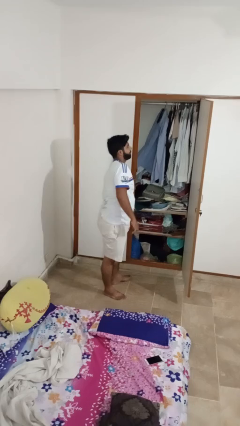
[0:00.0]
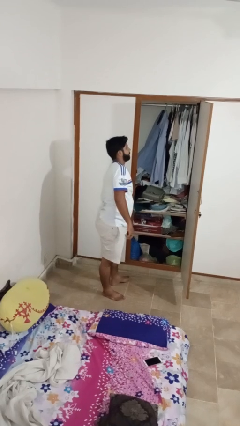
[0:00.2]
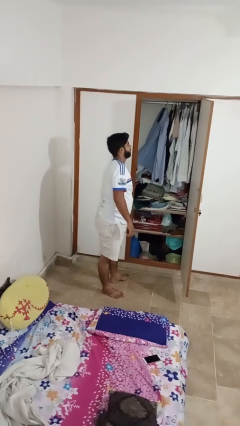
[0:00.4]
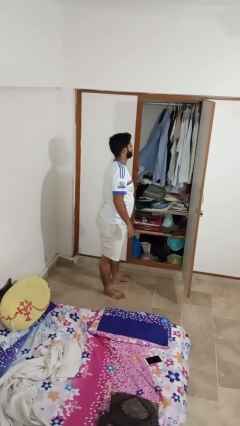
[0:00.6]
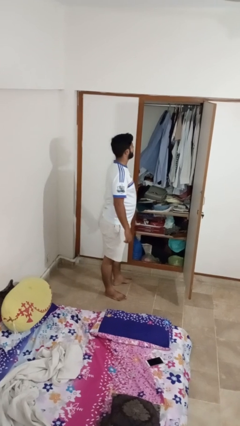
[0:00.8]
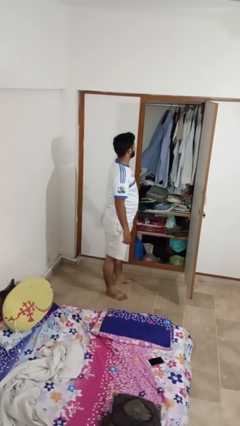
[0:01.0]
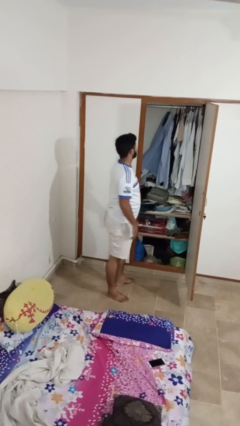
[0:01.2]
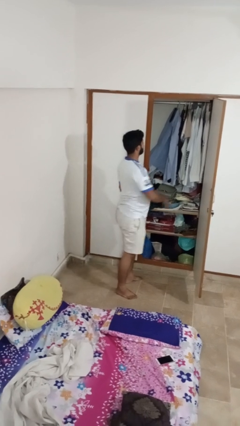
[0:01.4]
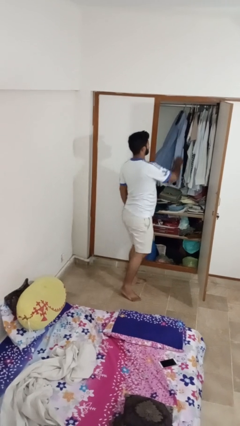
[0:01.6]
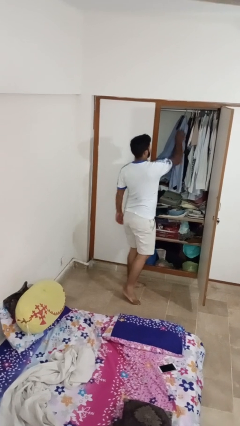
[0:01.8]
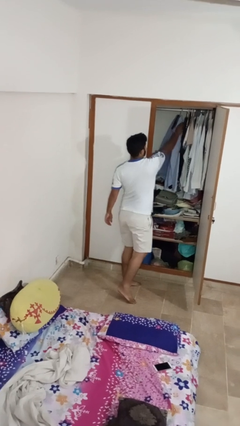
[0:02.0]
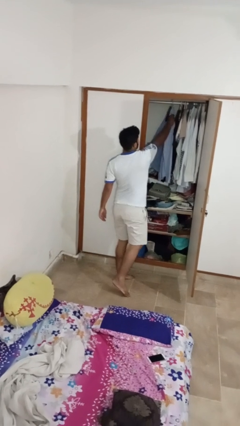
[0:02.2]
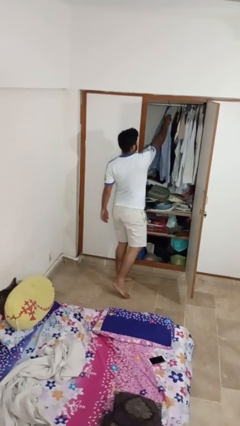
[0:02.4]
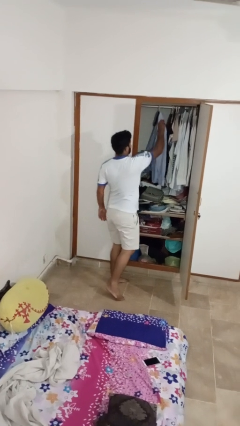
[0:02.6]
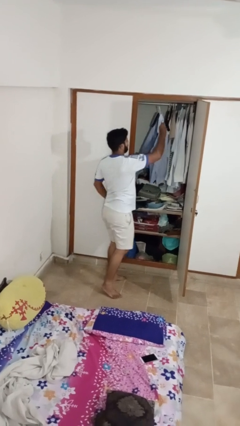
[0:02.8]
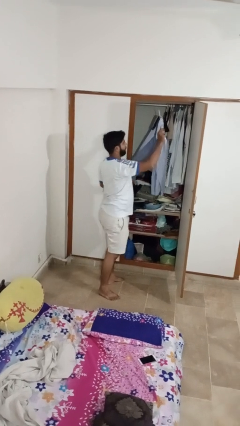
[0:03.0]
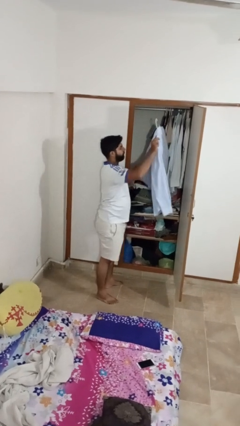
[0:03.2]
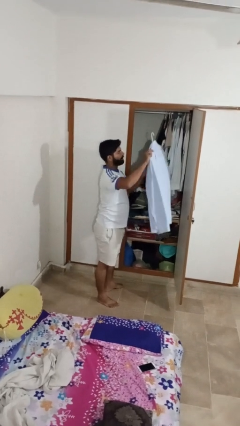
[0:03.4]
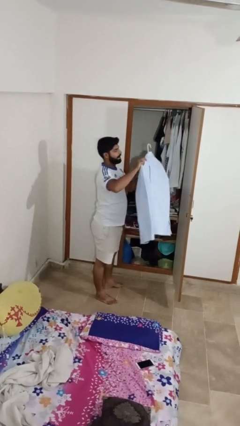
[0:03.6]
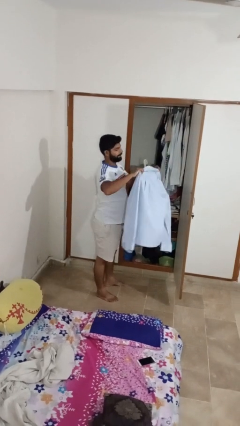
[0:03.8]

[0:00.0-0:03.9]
person takes clothes from closet

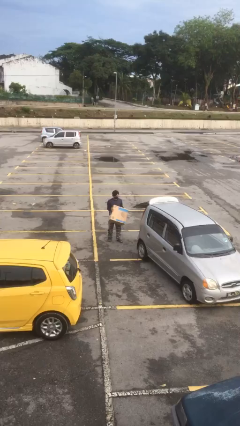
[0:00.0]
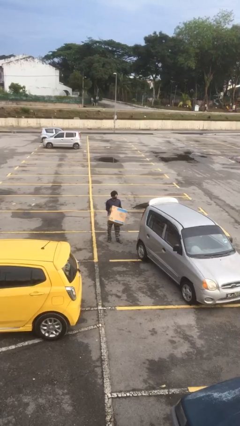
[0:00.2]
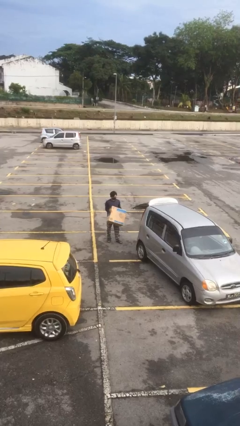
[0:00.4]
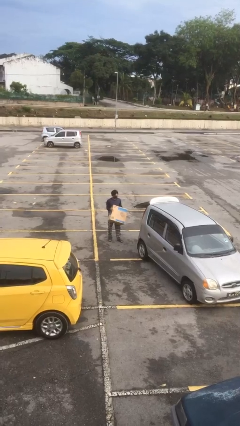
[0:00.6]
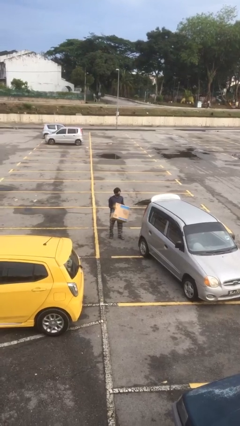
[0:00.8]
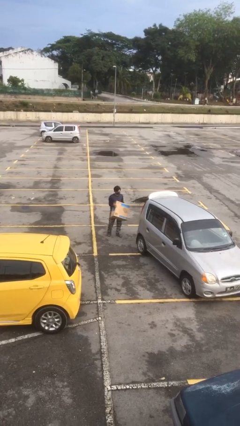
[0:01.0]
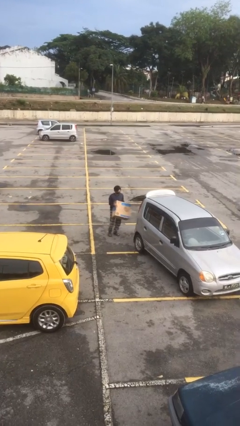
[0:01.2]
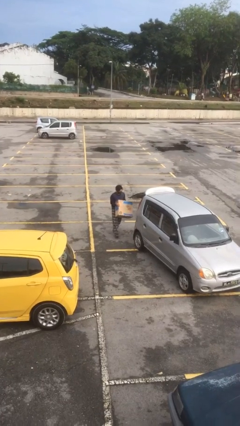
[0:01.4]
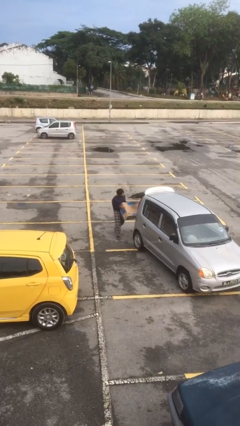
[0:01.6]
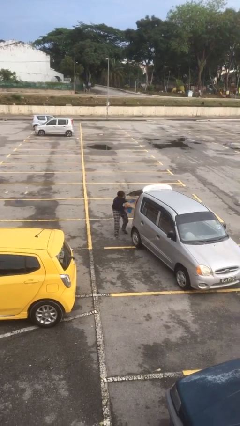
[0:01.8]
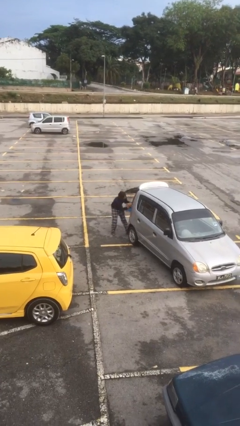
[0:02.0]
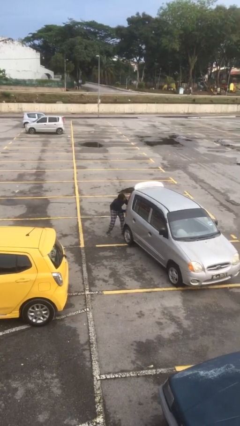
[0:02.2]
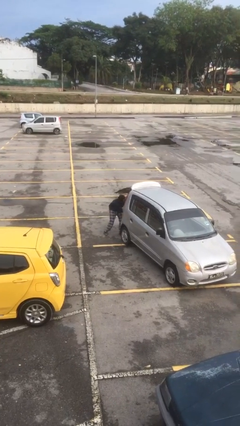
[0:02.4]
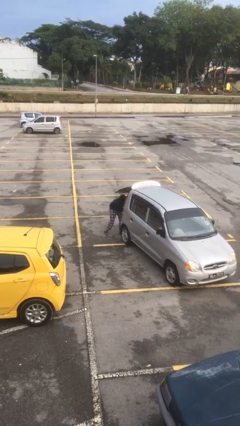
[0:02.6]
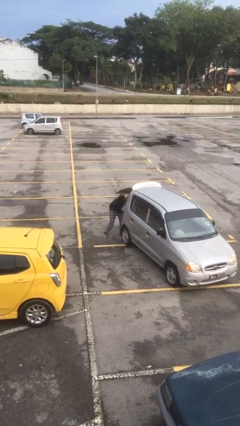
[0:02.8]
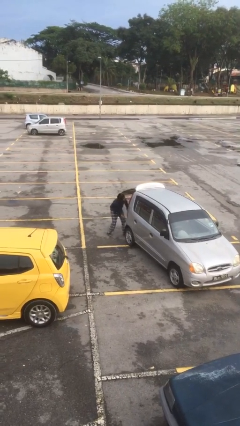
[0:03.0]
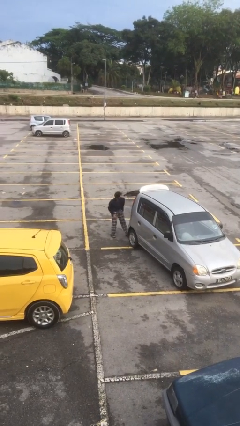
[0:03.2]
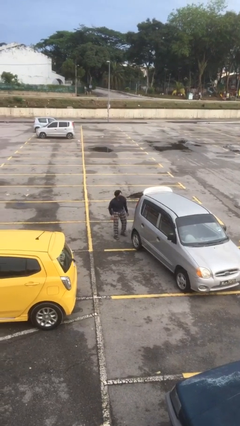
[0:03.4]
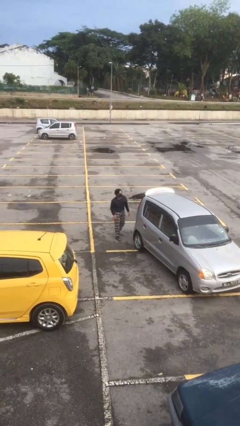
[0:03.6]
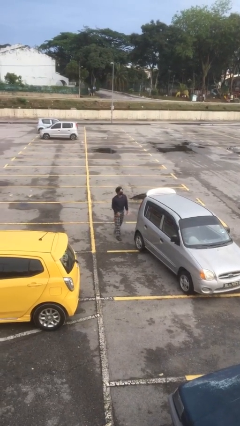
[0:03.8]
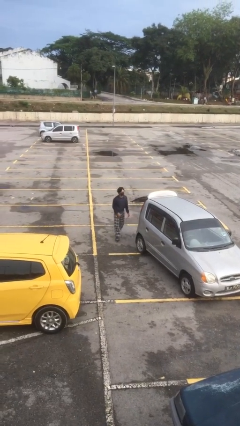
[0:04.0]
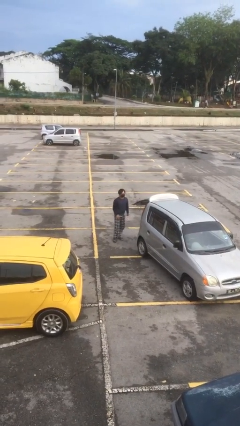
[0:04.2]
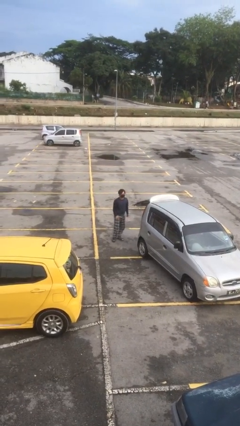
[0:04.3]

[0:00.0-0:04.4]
person loads car

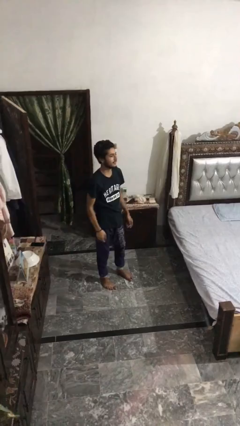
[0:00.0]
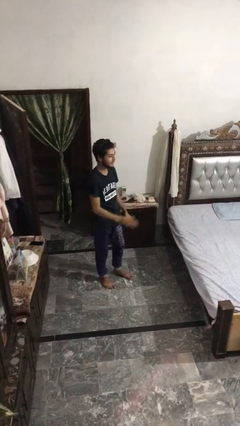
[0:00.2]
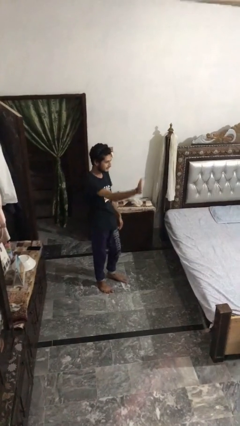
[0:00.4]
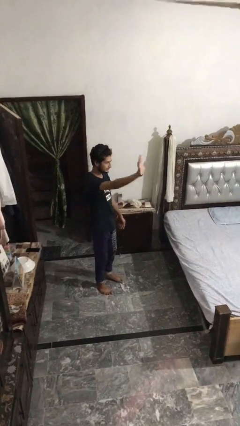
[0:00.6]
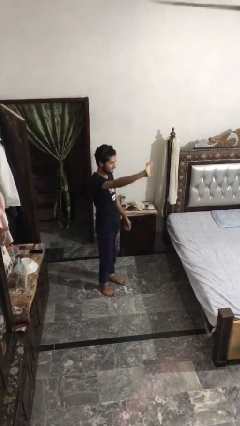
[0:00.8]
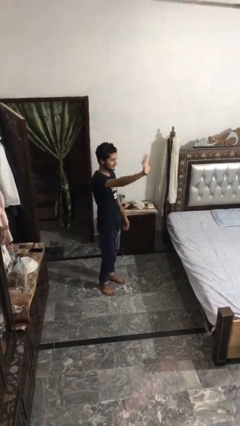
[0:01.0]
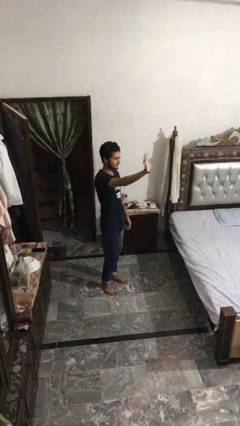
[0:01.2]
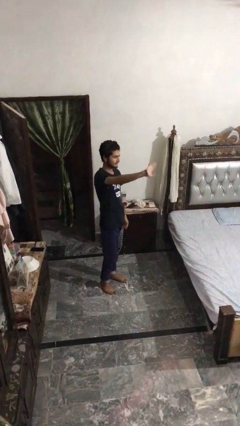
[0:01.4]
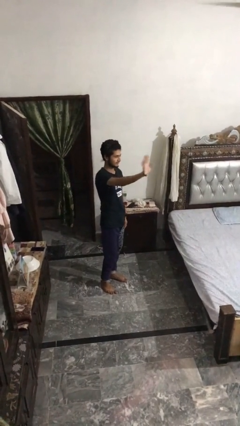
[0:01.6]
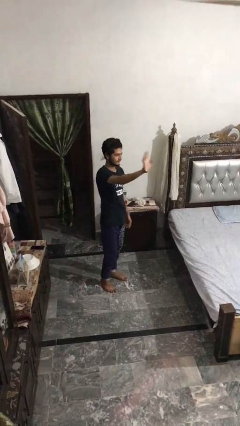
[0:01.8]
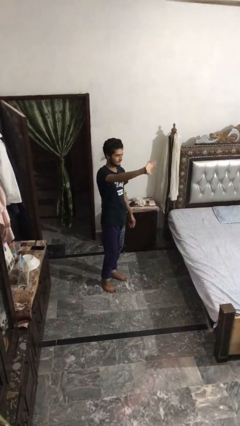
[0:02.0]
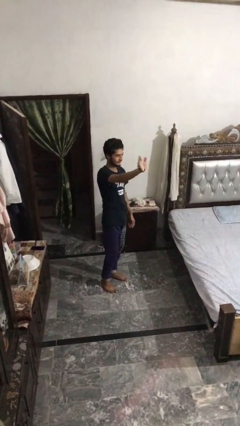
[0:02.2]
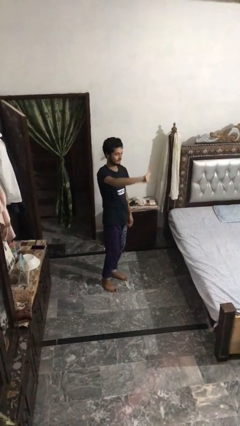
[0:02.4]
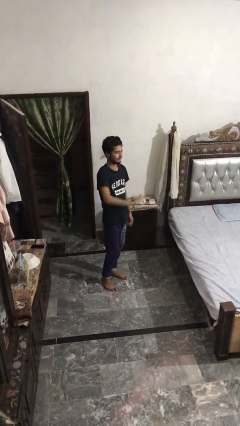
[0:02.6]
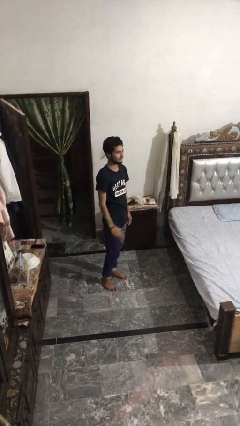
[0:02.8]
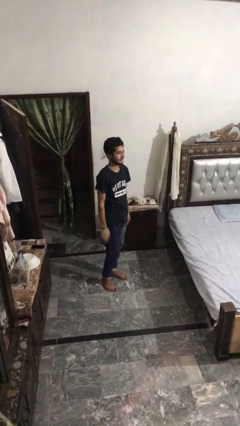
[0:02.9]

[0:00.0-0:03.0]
person waves at person

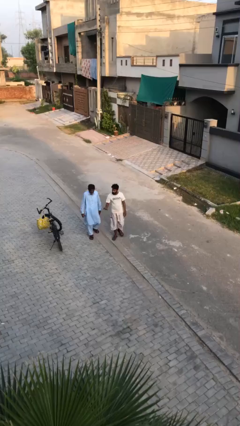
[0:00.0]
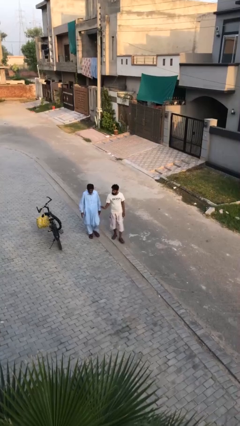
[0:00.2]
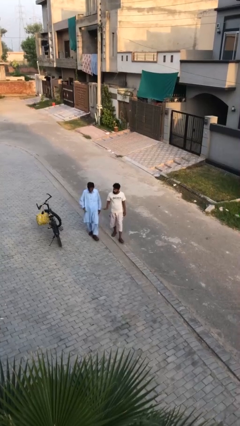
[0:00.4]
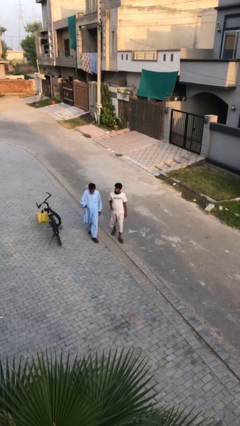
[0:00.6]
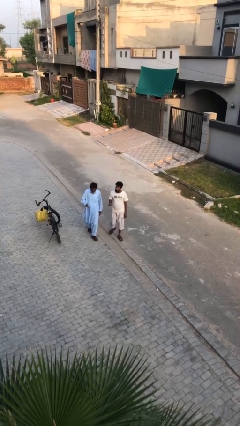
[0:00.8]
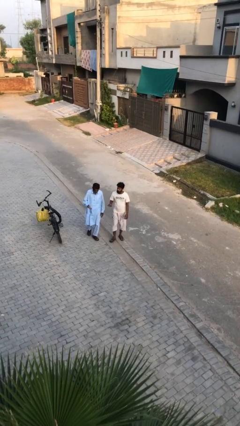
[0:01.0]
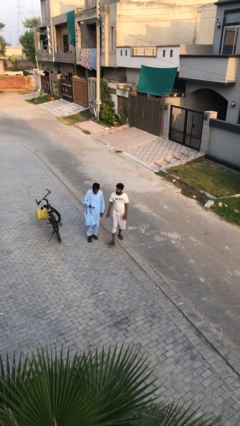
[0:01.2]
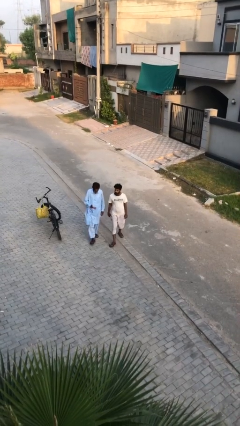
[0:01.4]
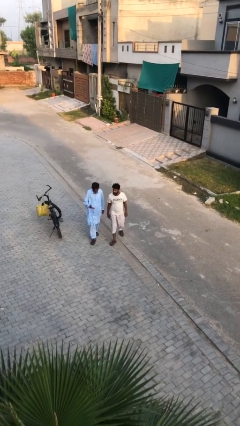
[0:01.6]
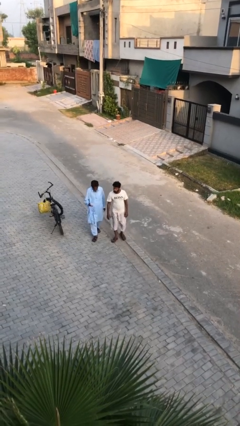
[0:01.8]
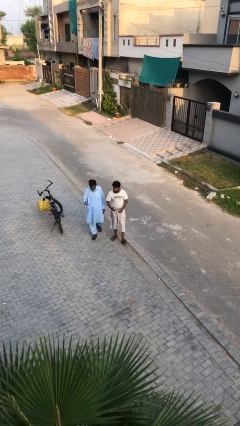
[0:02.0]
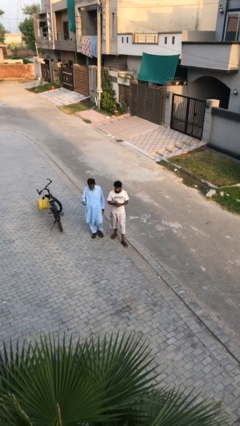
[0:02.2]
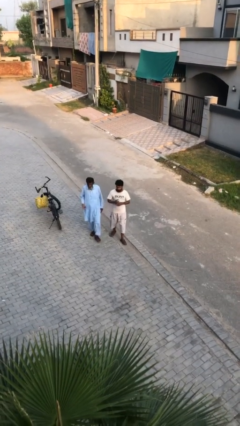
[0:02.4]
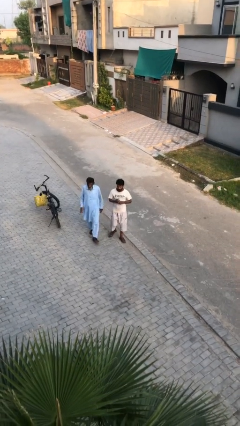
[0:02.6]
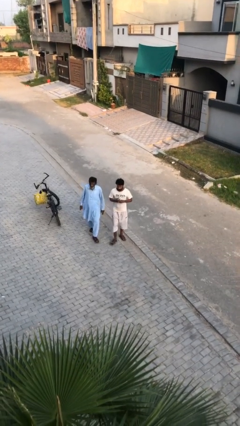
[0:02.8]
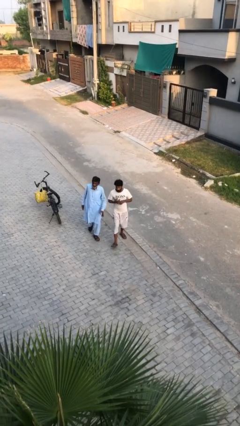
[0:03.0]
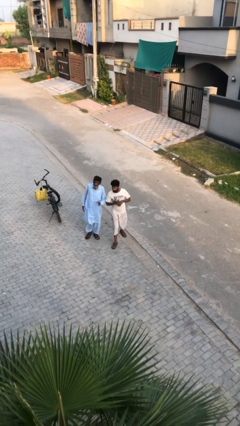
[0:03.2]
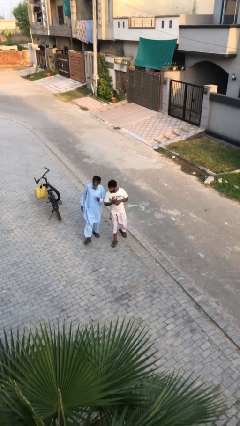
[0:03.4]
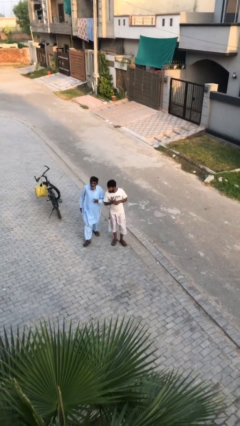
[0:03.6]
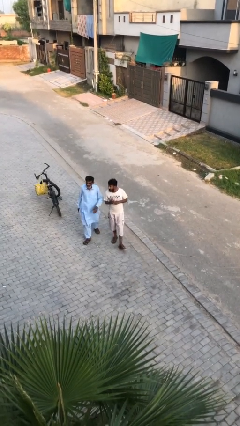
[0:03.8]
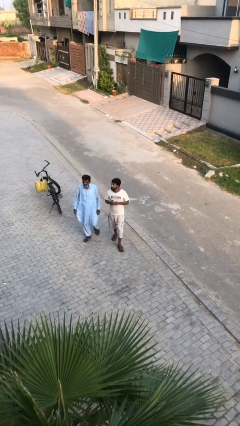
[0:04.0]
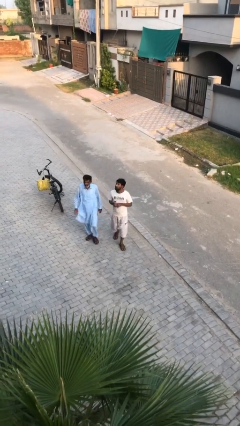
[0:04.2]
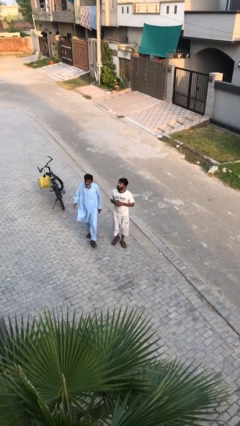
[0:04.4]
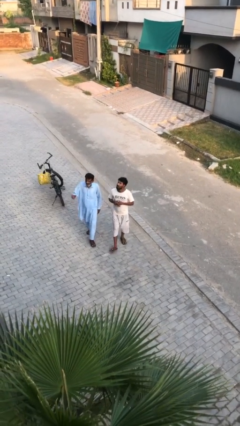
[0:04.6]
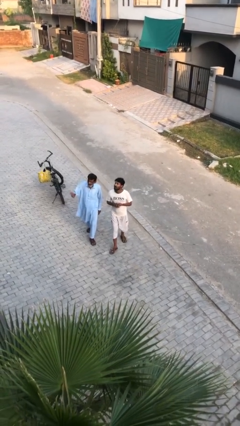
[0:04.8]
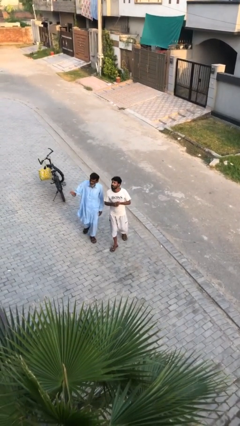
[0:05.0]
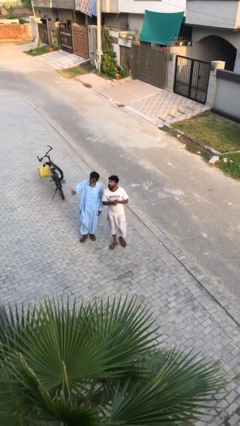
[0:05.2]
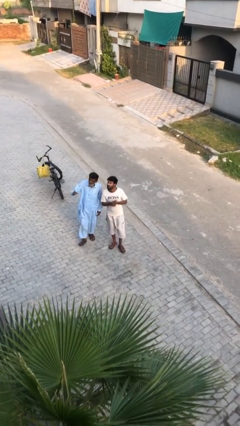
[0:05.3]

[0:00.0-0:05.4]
person talks to person

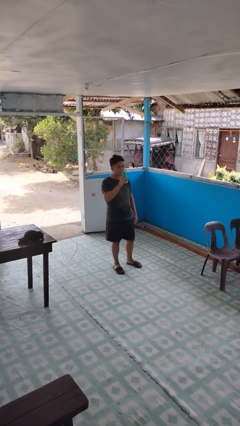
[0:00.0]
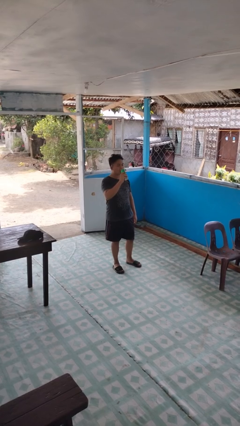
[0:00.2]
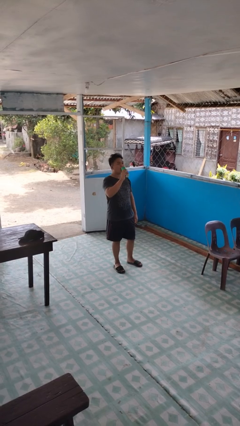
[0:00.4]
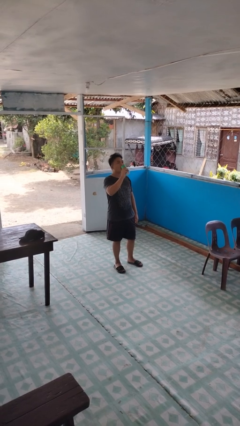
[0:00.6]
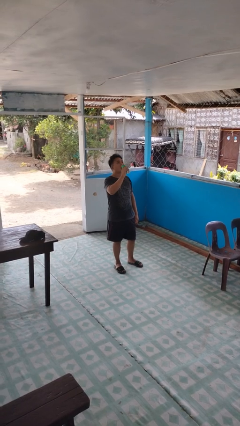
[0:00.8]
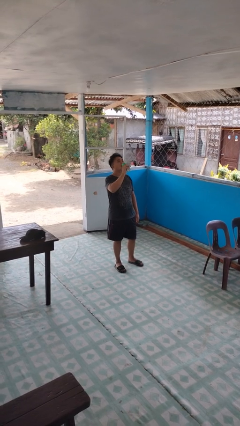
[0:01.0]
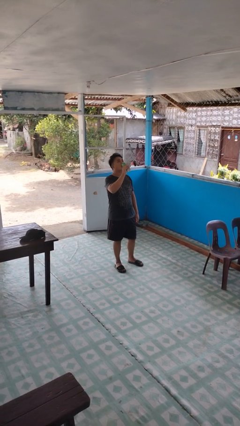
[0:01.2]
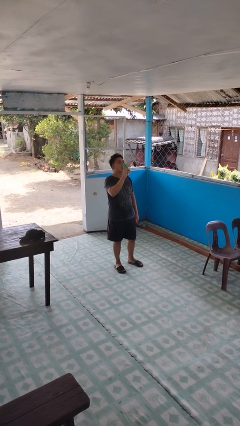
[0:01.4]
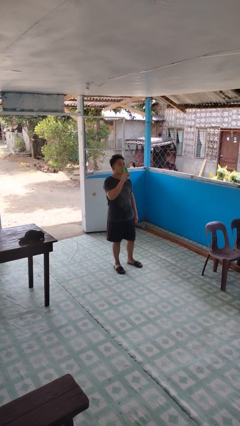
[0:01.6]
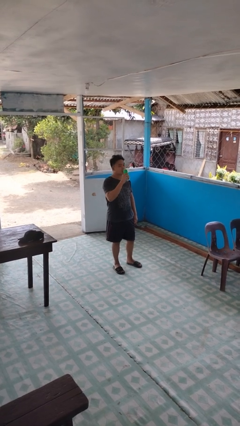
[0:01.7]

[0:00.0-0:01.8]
person drinks from beverage can
